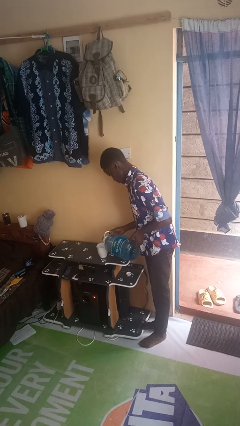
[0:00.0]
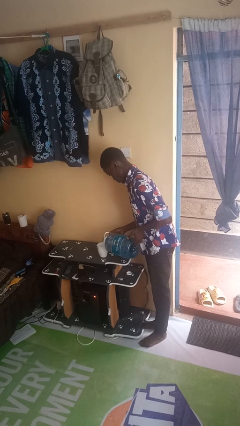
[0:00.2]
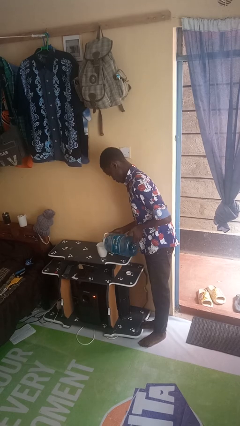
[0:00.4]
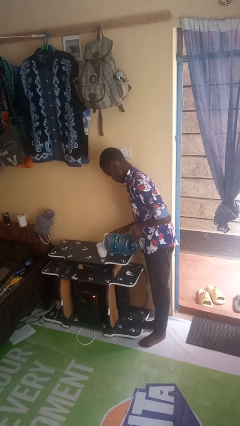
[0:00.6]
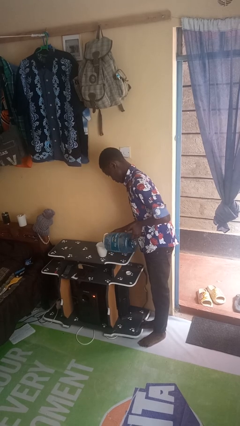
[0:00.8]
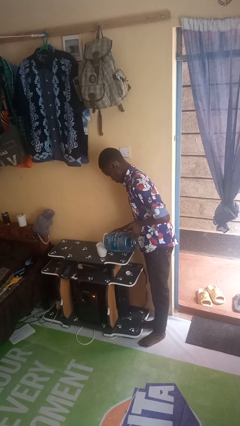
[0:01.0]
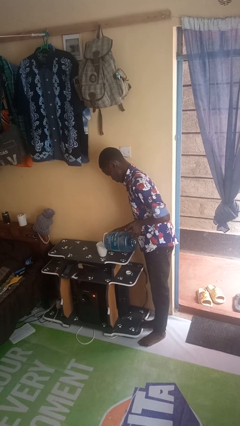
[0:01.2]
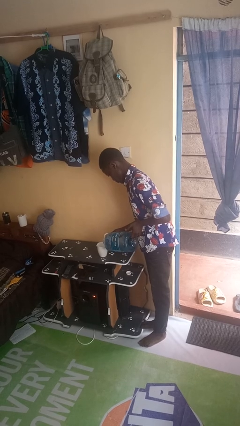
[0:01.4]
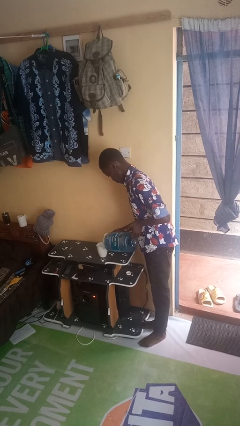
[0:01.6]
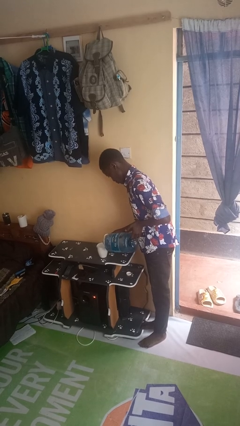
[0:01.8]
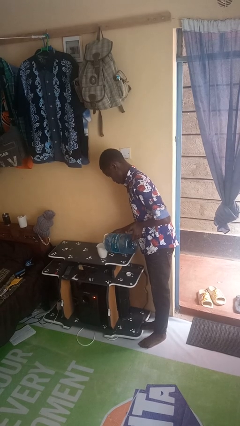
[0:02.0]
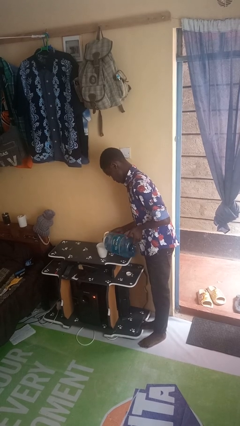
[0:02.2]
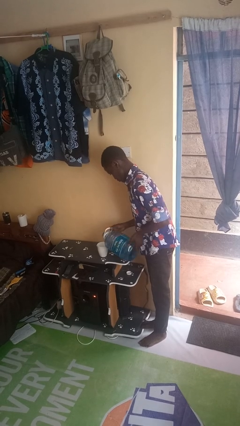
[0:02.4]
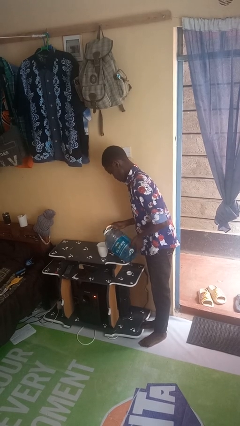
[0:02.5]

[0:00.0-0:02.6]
person pours liquid into cup

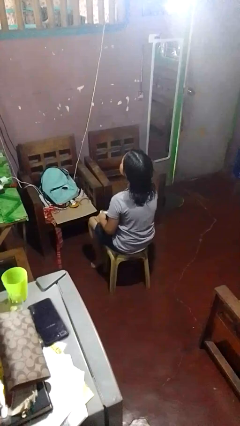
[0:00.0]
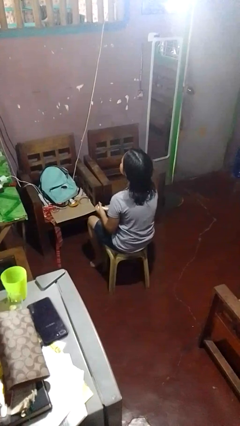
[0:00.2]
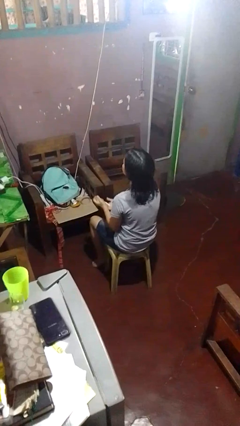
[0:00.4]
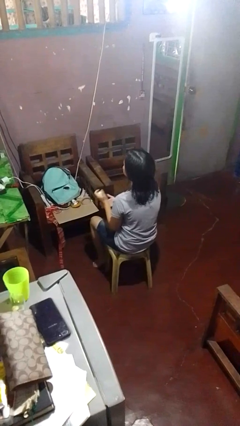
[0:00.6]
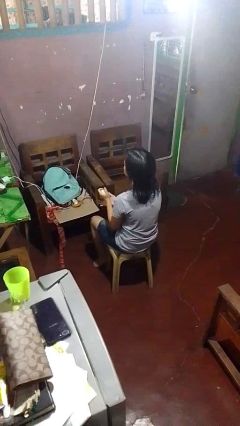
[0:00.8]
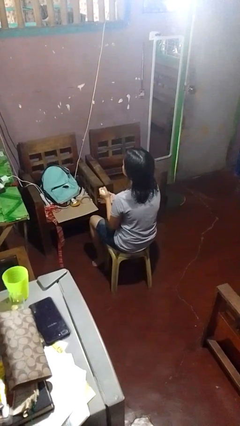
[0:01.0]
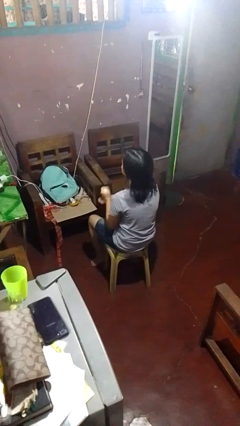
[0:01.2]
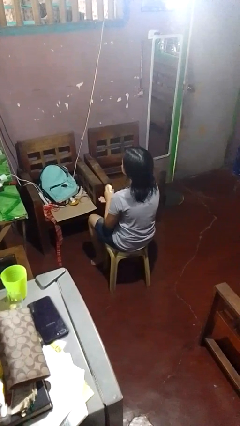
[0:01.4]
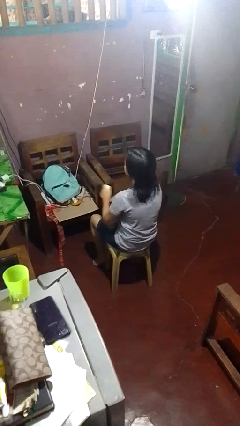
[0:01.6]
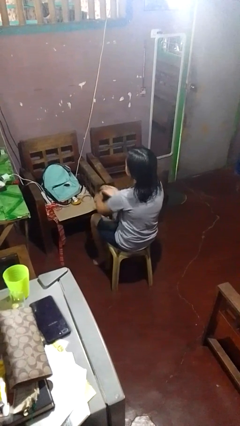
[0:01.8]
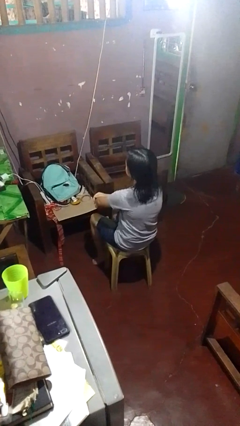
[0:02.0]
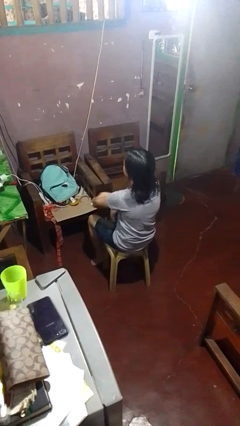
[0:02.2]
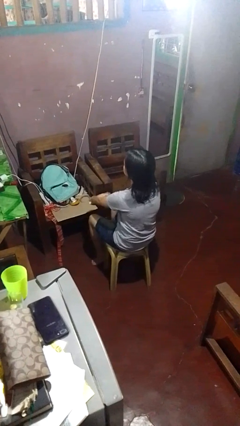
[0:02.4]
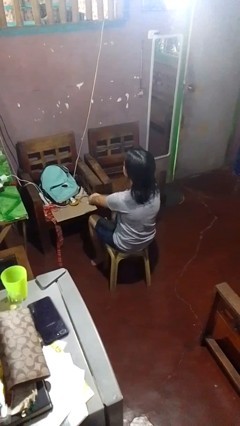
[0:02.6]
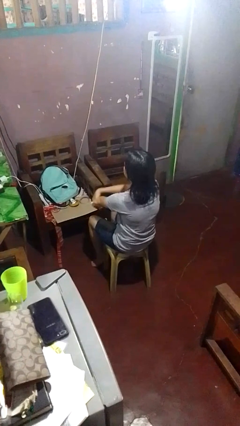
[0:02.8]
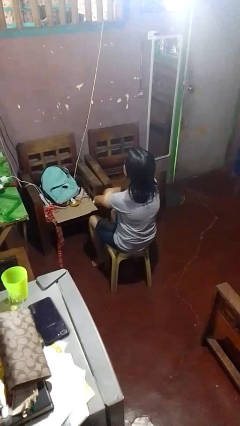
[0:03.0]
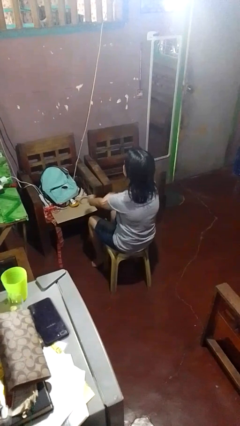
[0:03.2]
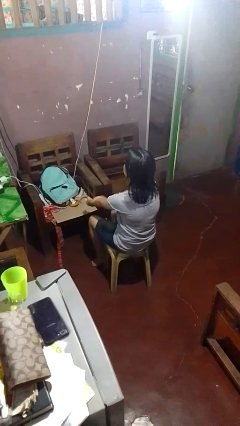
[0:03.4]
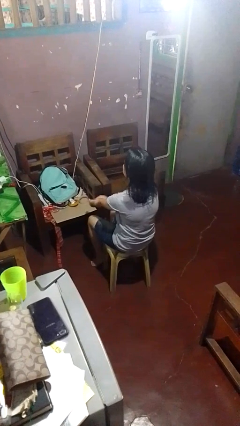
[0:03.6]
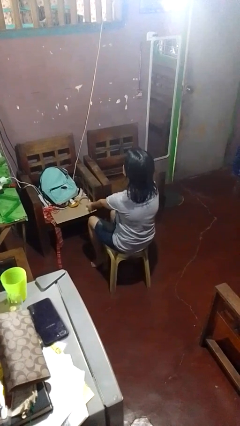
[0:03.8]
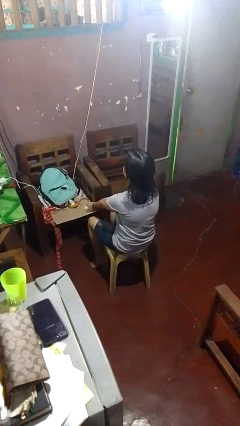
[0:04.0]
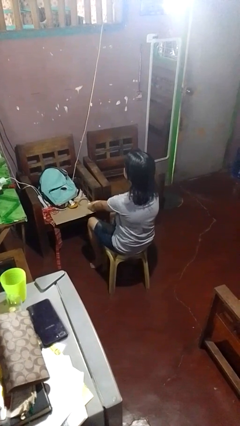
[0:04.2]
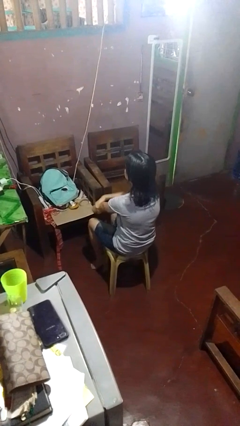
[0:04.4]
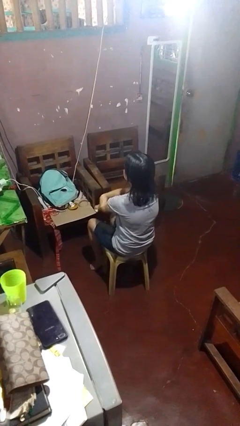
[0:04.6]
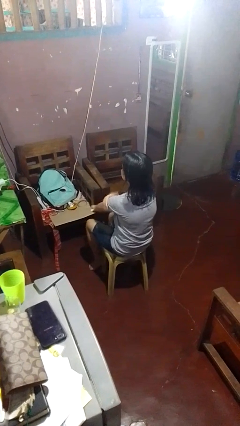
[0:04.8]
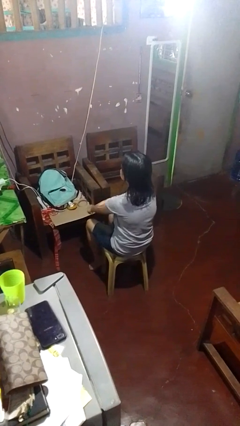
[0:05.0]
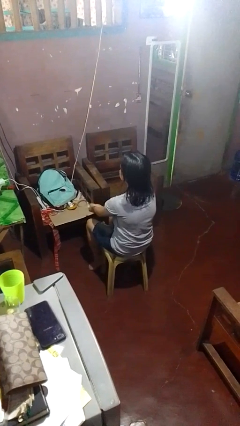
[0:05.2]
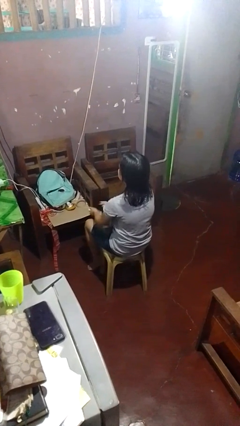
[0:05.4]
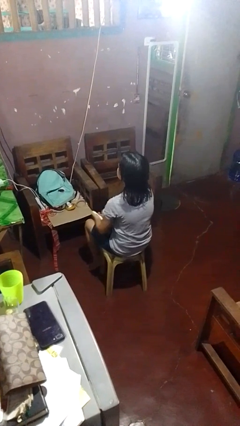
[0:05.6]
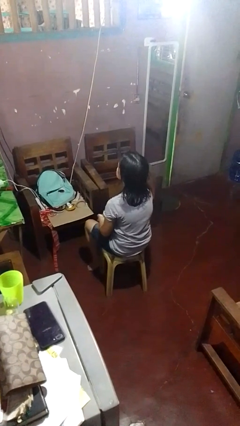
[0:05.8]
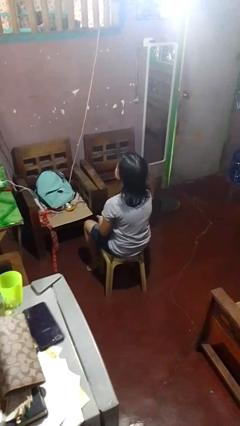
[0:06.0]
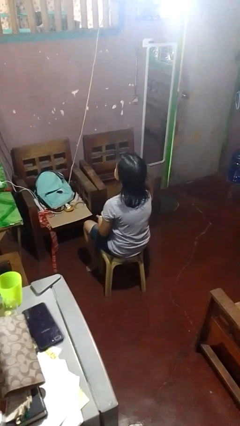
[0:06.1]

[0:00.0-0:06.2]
person applies sunscreen

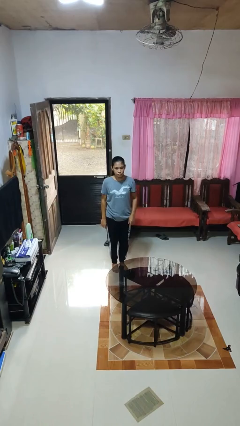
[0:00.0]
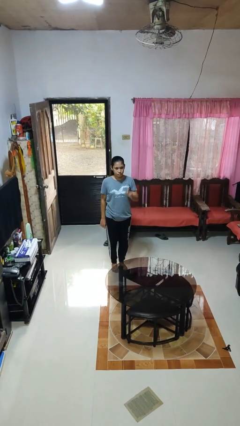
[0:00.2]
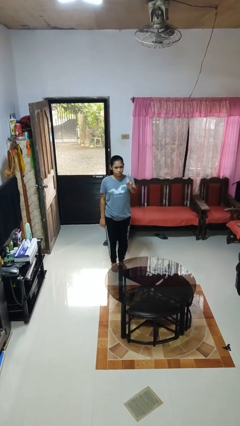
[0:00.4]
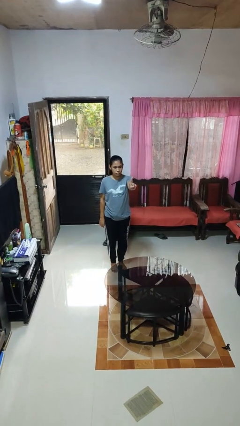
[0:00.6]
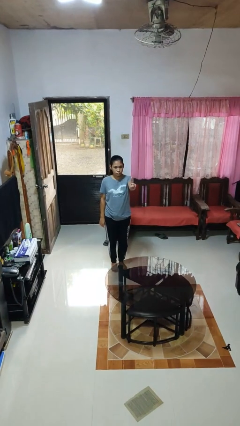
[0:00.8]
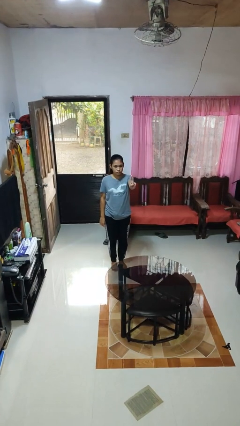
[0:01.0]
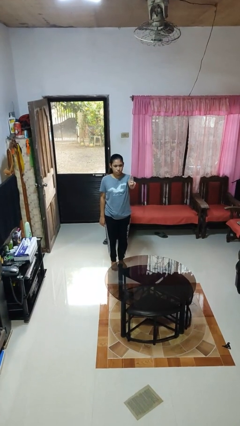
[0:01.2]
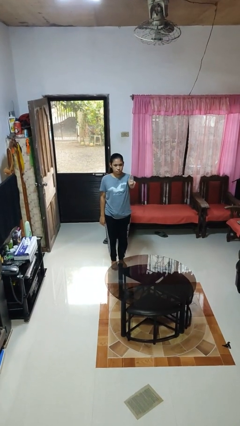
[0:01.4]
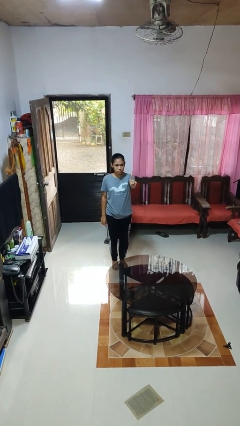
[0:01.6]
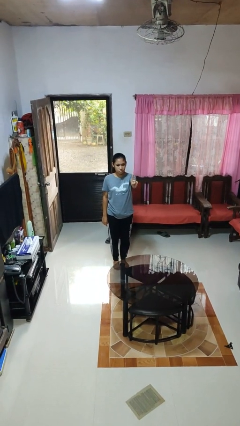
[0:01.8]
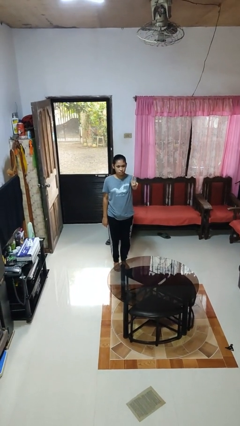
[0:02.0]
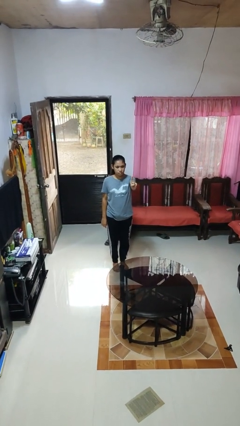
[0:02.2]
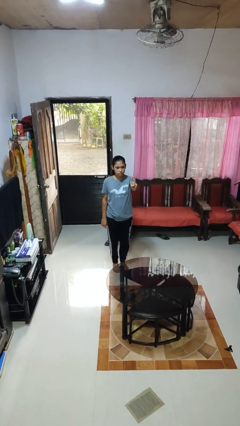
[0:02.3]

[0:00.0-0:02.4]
person gestures number one

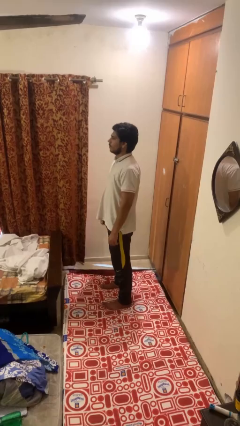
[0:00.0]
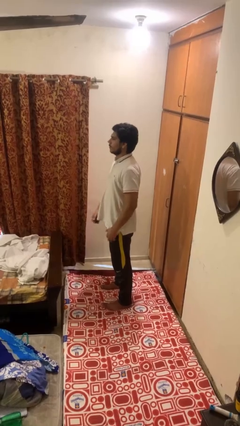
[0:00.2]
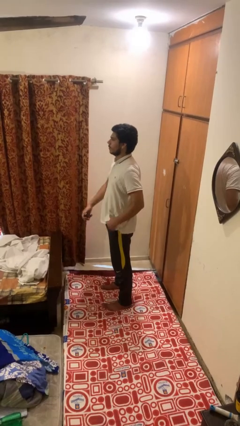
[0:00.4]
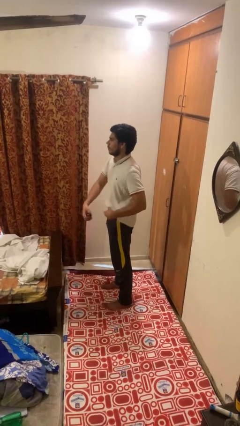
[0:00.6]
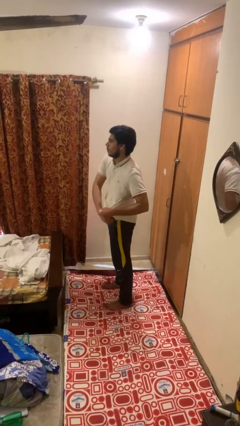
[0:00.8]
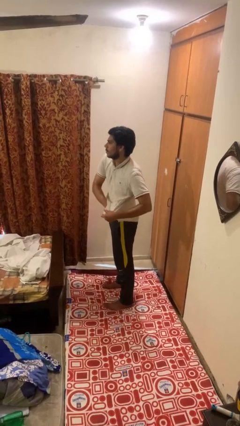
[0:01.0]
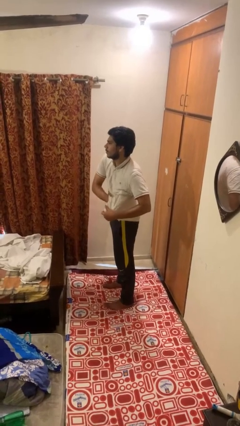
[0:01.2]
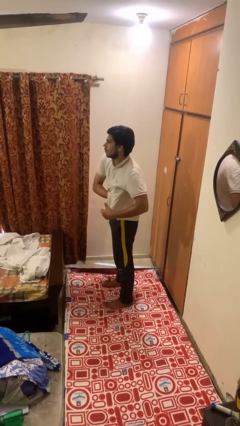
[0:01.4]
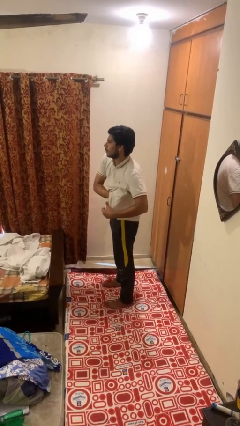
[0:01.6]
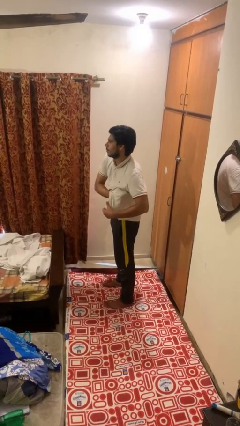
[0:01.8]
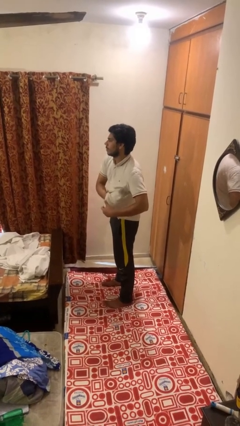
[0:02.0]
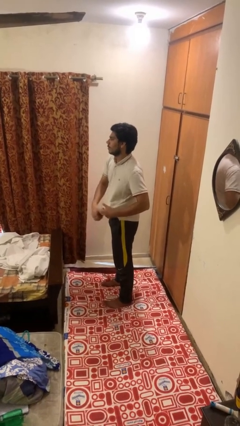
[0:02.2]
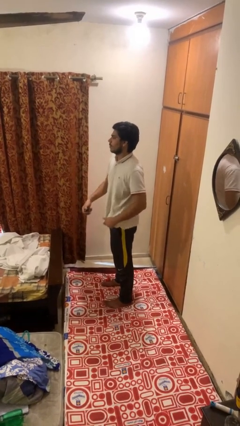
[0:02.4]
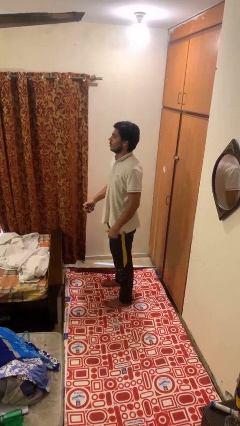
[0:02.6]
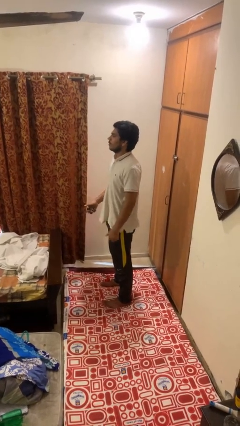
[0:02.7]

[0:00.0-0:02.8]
person applies deodorant

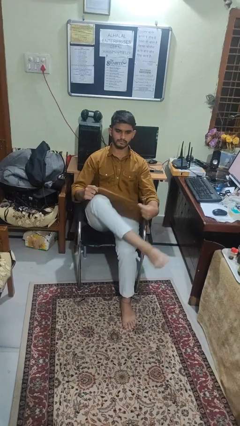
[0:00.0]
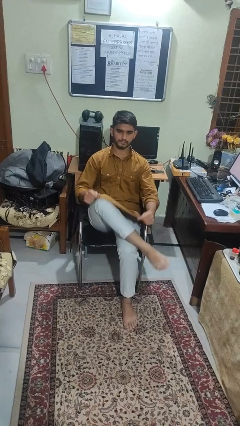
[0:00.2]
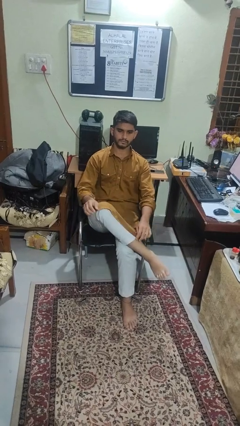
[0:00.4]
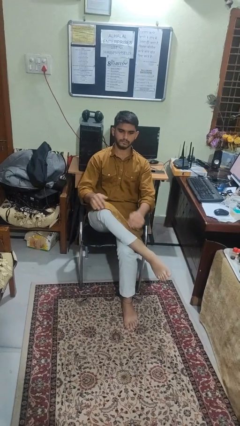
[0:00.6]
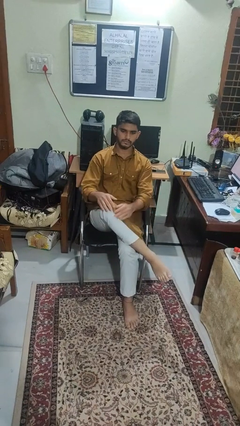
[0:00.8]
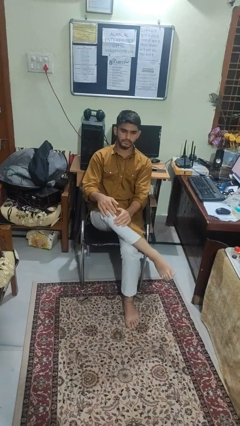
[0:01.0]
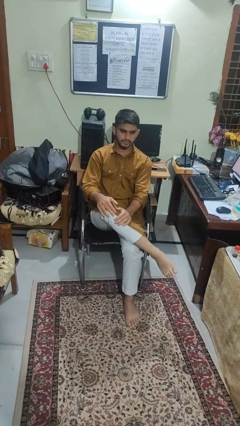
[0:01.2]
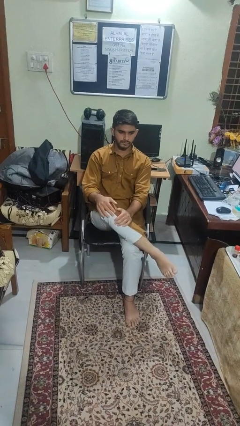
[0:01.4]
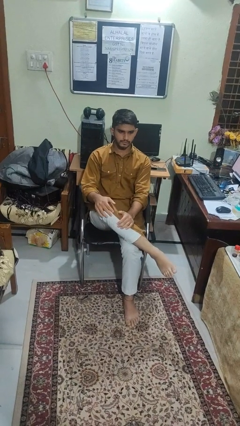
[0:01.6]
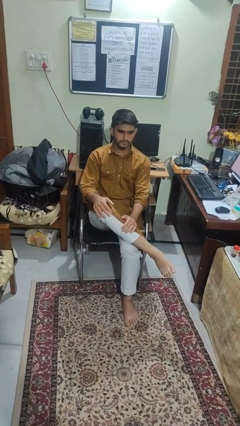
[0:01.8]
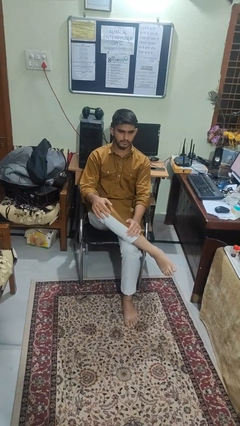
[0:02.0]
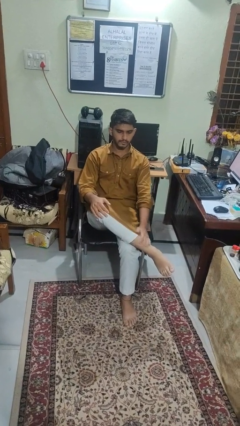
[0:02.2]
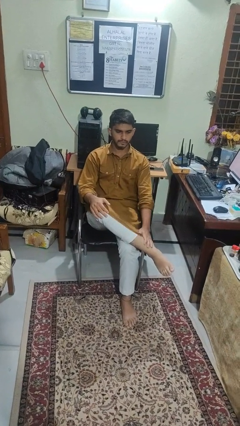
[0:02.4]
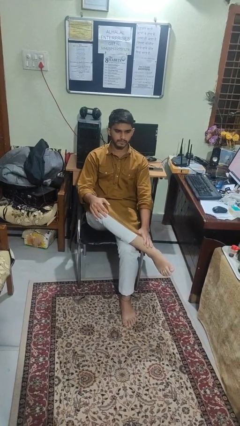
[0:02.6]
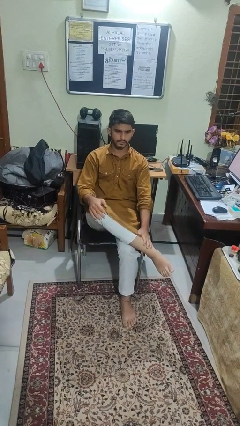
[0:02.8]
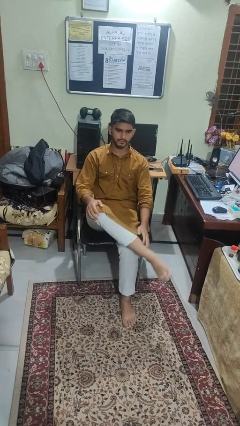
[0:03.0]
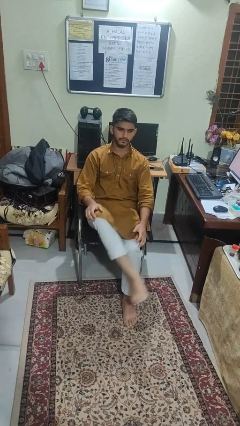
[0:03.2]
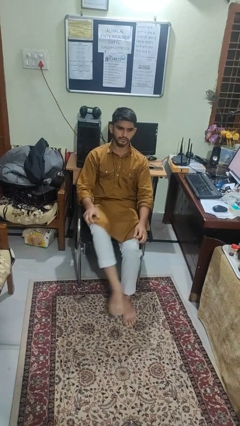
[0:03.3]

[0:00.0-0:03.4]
person crosses legs

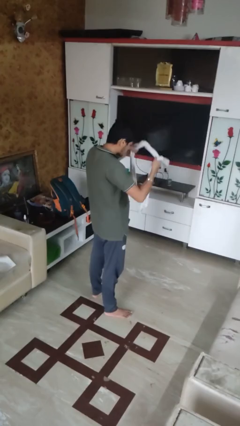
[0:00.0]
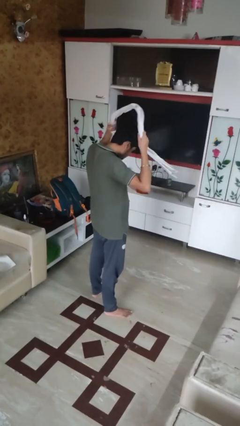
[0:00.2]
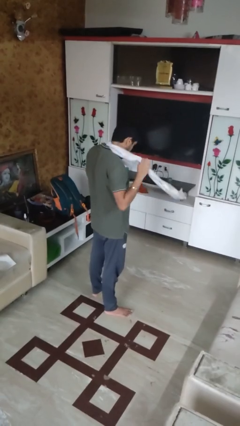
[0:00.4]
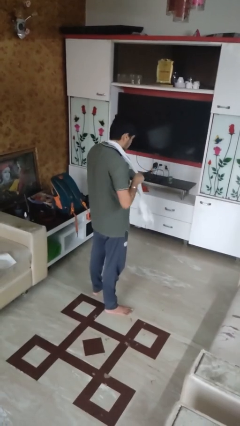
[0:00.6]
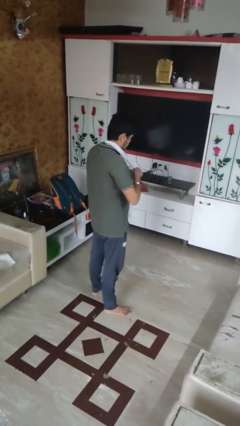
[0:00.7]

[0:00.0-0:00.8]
person puts on scarf
